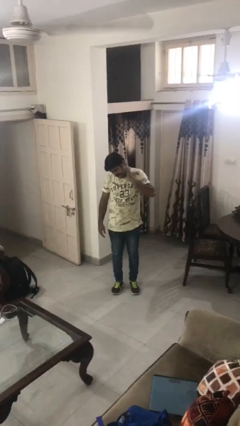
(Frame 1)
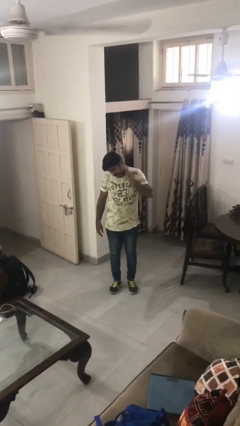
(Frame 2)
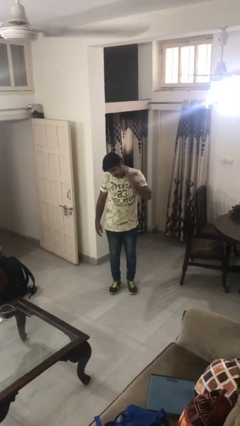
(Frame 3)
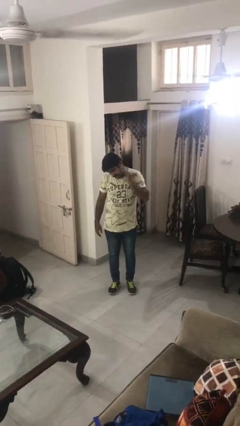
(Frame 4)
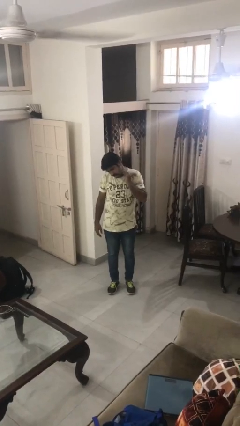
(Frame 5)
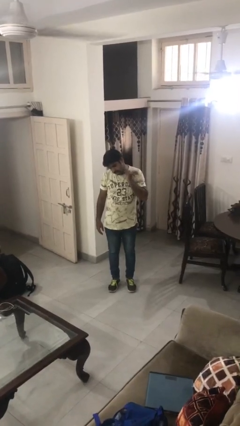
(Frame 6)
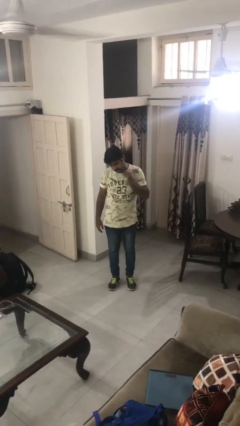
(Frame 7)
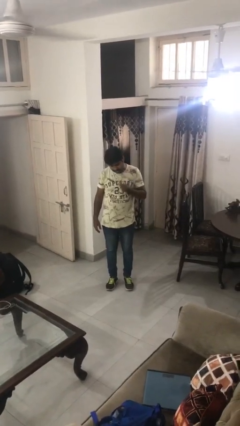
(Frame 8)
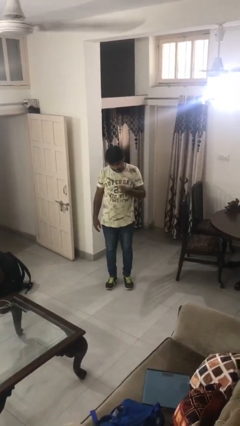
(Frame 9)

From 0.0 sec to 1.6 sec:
person swats bug

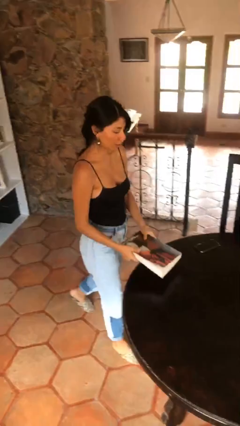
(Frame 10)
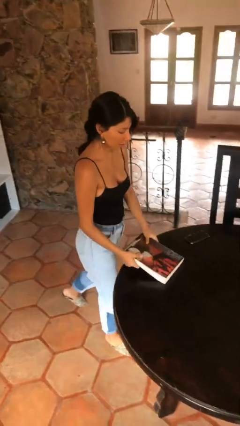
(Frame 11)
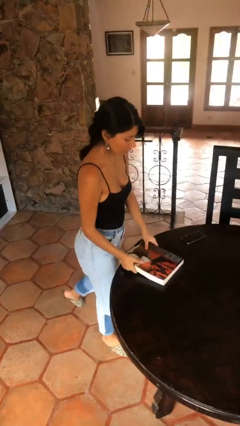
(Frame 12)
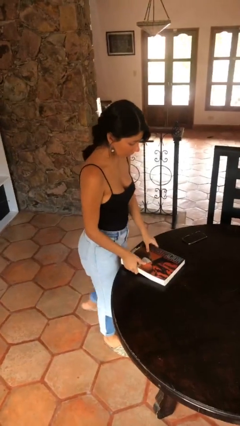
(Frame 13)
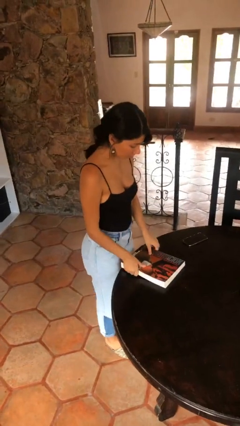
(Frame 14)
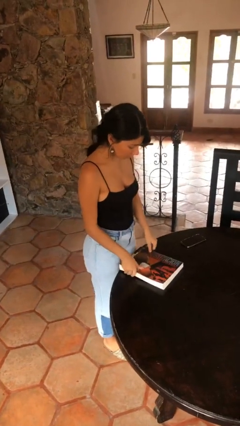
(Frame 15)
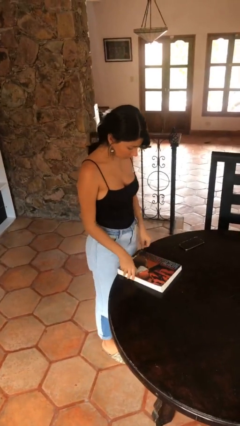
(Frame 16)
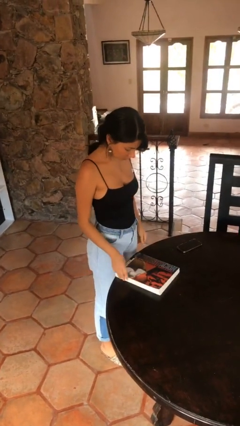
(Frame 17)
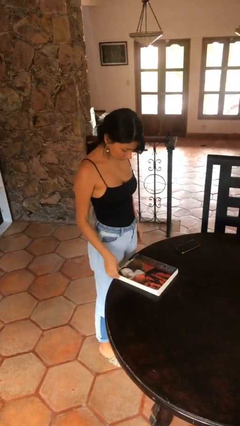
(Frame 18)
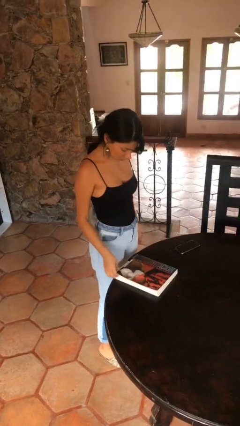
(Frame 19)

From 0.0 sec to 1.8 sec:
person puts down object on table

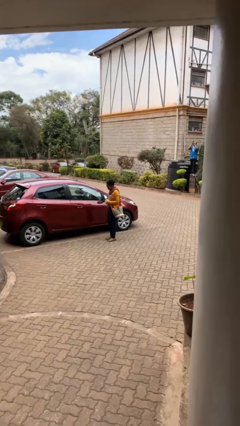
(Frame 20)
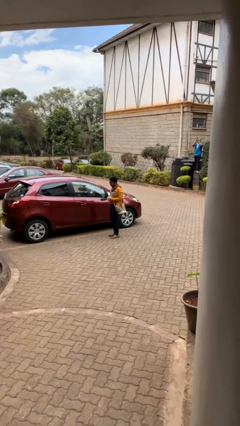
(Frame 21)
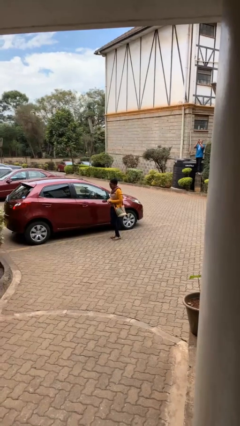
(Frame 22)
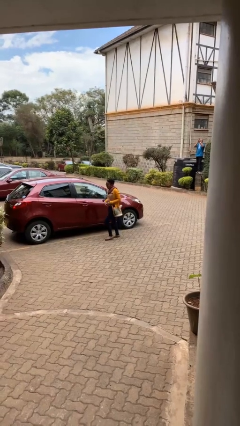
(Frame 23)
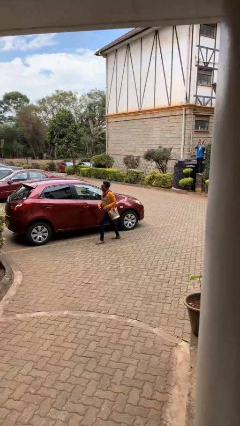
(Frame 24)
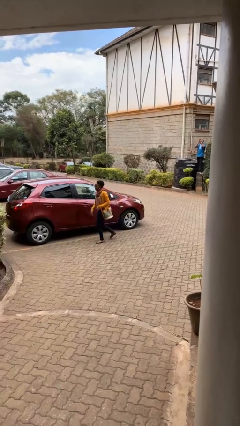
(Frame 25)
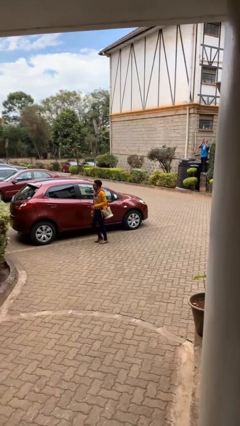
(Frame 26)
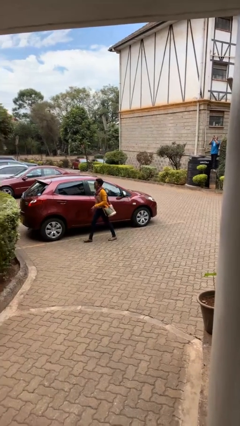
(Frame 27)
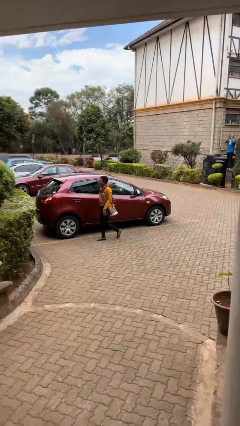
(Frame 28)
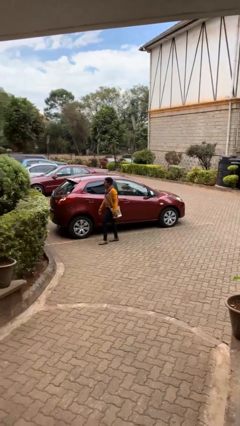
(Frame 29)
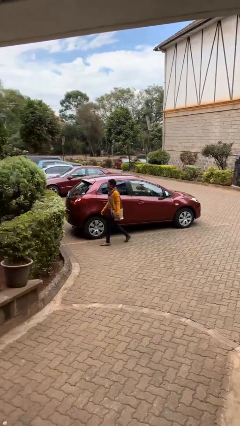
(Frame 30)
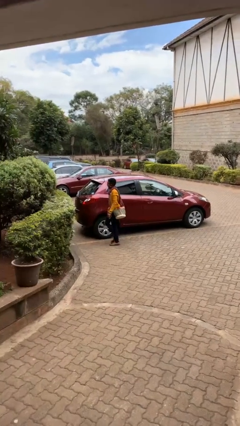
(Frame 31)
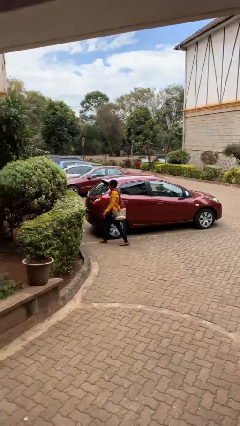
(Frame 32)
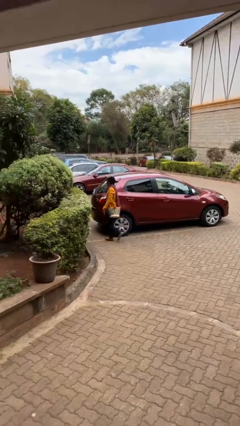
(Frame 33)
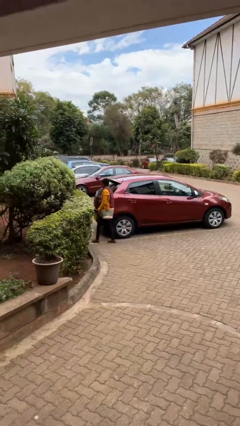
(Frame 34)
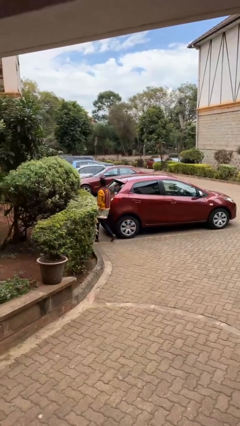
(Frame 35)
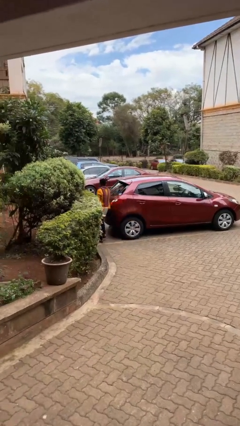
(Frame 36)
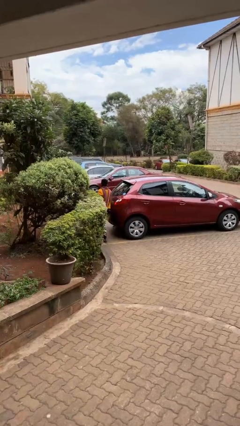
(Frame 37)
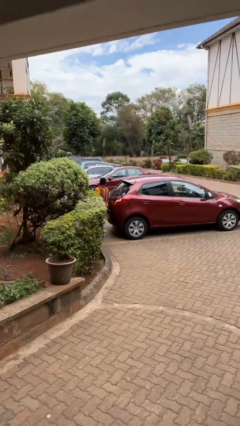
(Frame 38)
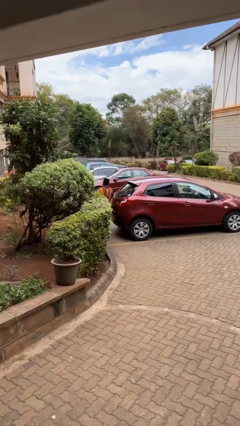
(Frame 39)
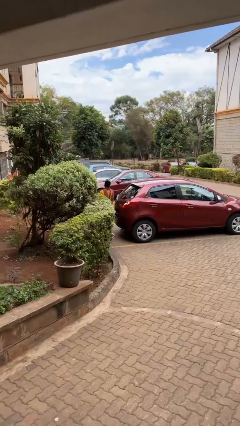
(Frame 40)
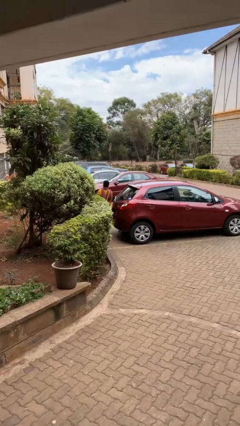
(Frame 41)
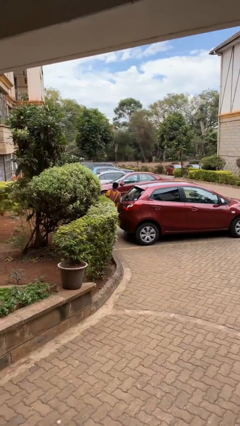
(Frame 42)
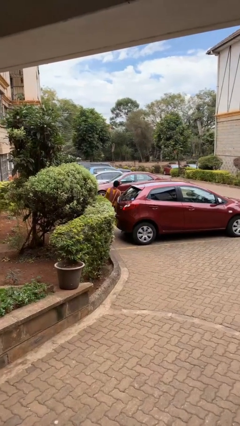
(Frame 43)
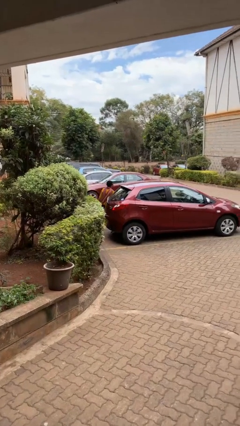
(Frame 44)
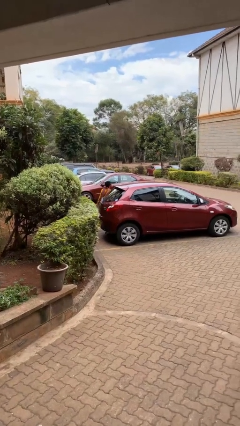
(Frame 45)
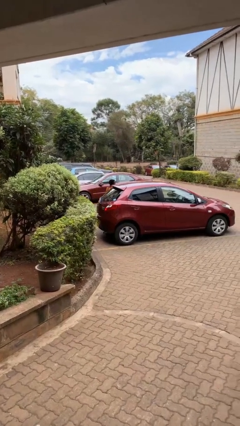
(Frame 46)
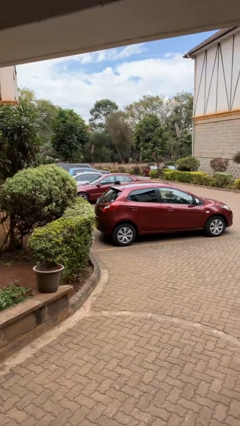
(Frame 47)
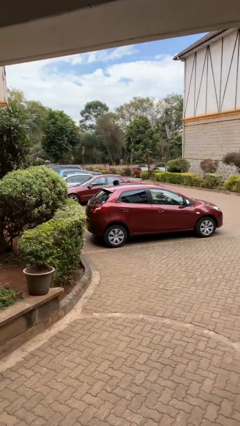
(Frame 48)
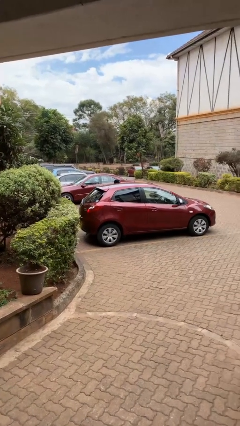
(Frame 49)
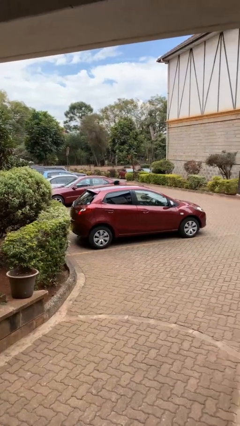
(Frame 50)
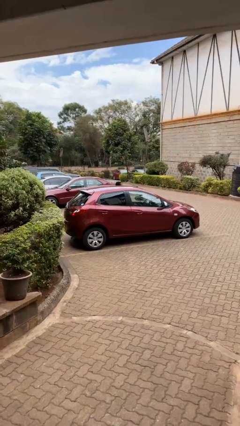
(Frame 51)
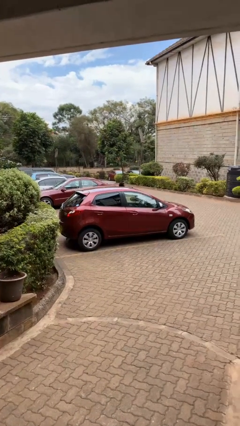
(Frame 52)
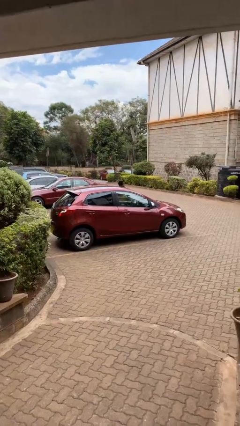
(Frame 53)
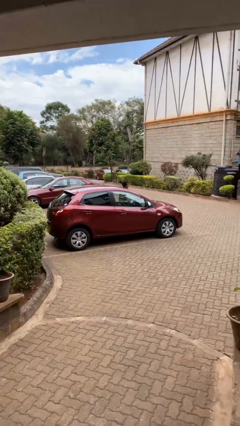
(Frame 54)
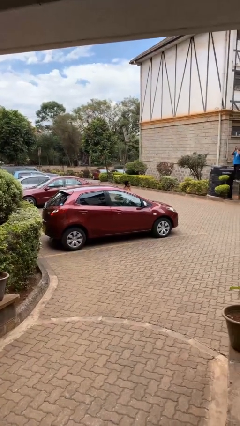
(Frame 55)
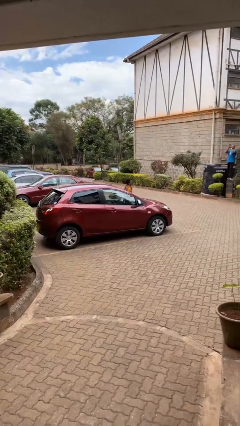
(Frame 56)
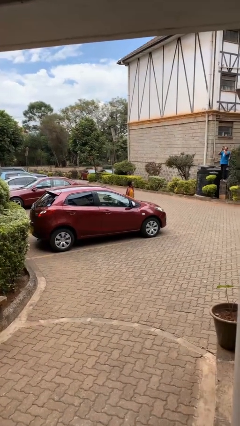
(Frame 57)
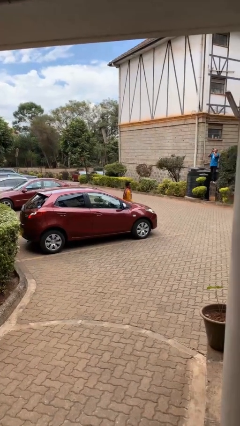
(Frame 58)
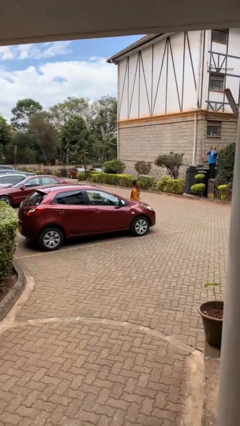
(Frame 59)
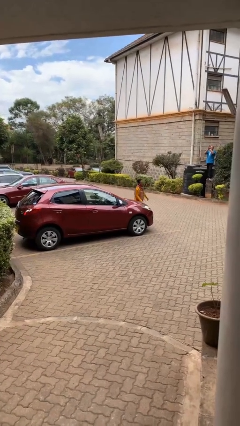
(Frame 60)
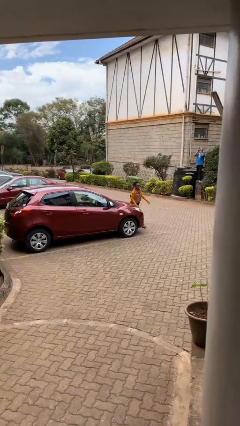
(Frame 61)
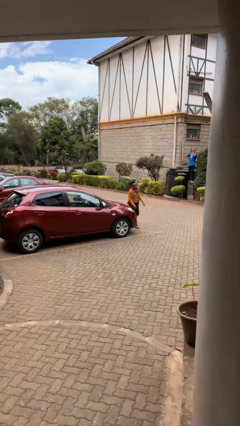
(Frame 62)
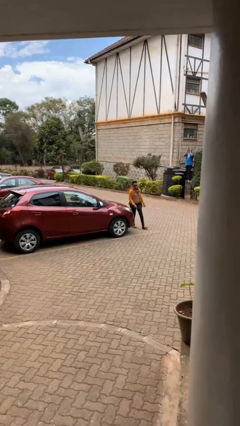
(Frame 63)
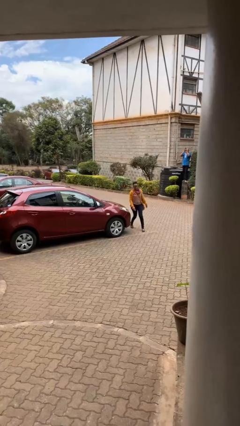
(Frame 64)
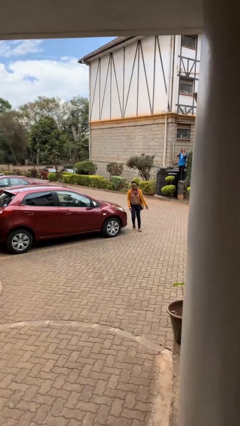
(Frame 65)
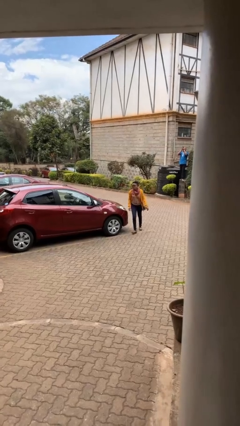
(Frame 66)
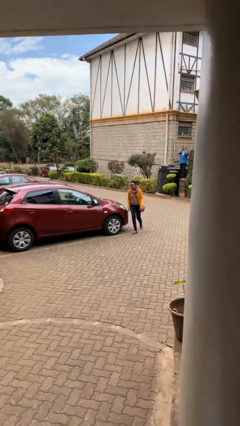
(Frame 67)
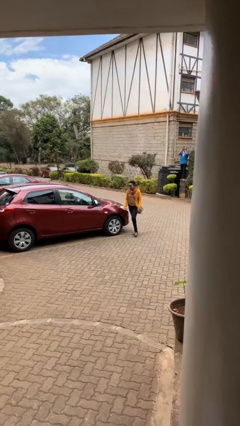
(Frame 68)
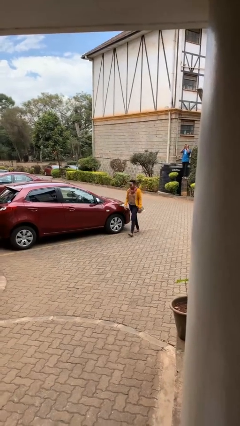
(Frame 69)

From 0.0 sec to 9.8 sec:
person walks around car

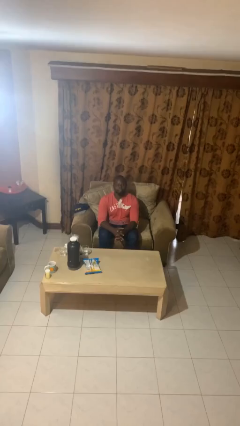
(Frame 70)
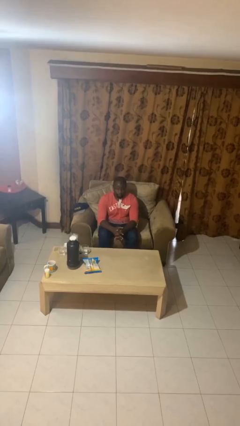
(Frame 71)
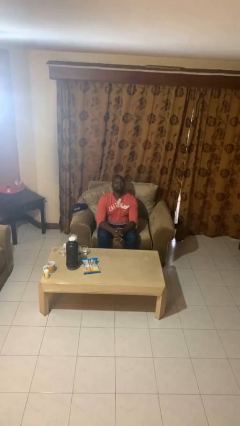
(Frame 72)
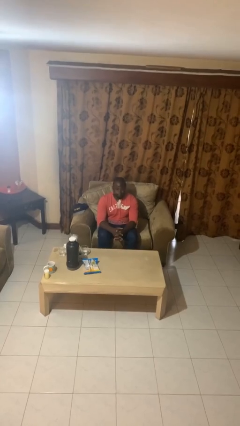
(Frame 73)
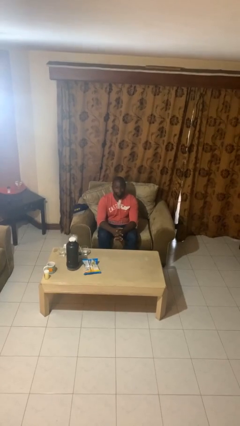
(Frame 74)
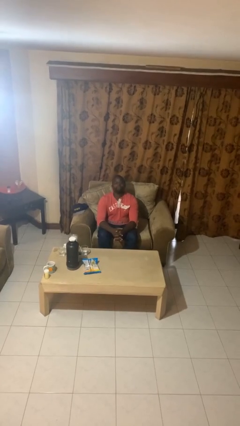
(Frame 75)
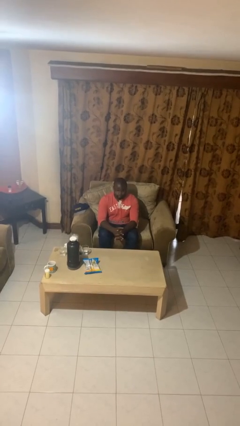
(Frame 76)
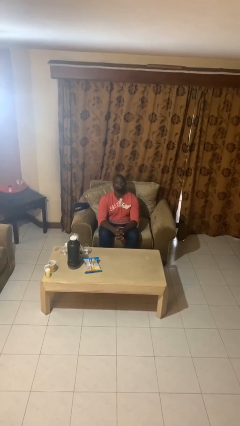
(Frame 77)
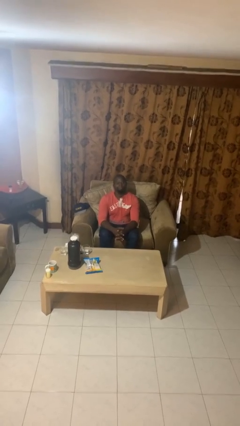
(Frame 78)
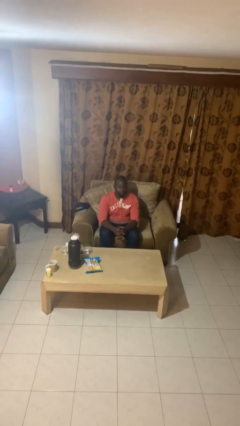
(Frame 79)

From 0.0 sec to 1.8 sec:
person nods head

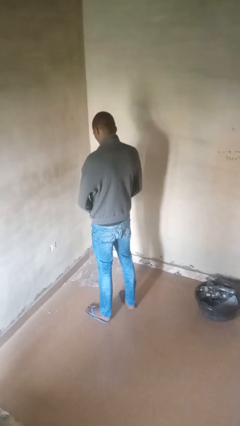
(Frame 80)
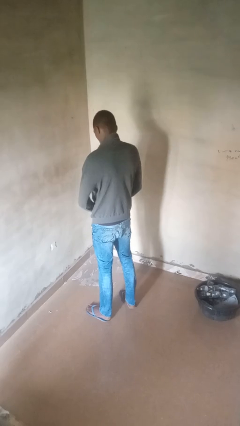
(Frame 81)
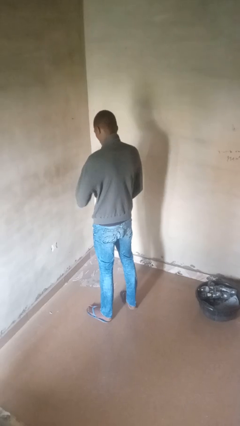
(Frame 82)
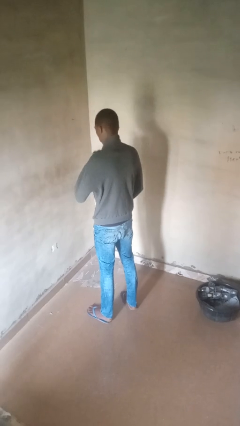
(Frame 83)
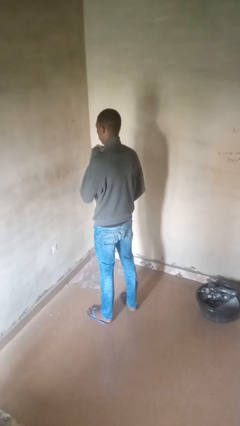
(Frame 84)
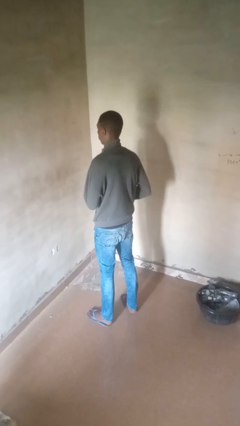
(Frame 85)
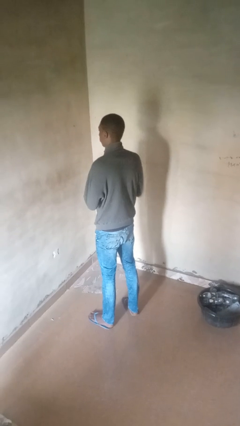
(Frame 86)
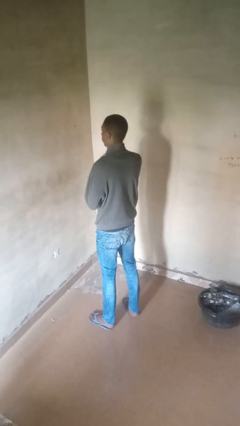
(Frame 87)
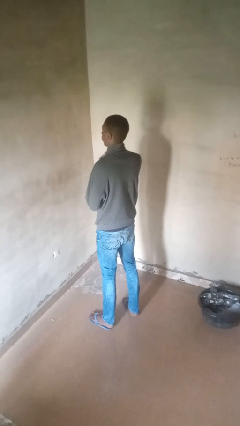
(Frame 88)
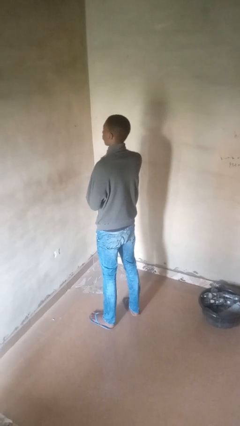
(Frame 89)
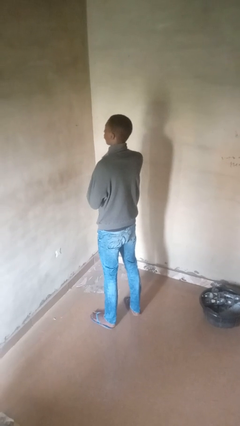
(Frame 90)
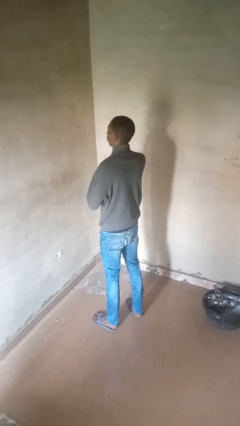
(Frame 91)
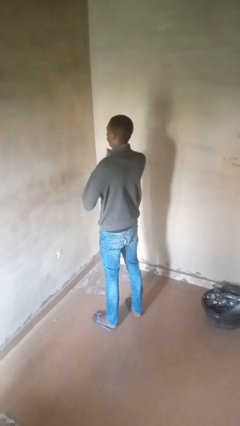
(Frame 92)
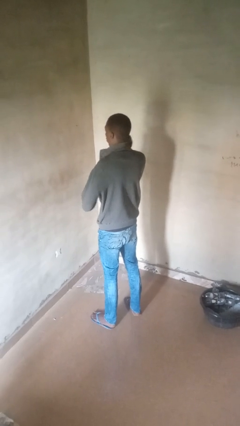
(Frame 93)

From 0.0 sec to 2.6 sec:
person zips up jacket
